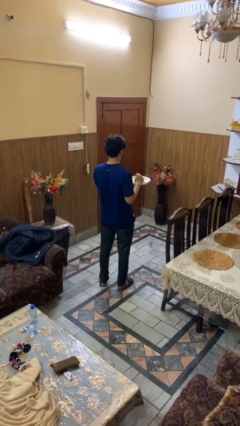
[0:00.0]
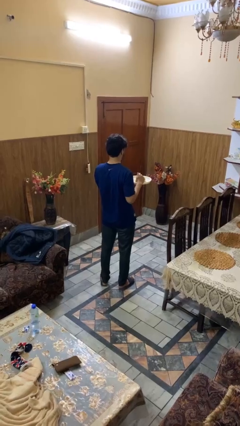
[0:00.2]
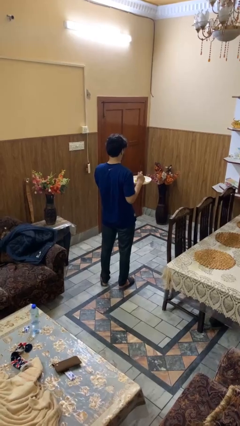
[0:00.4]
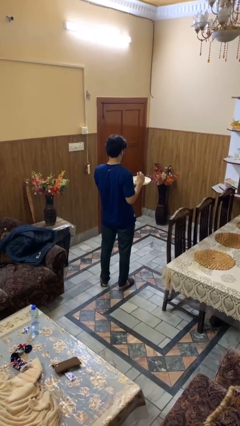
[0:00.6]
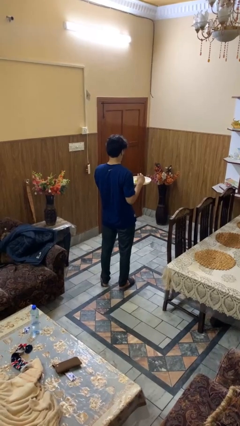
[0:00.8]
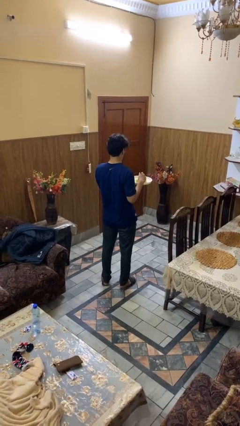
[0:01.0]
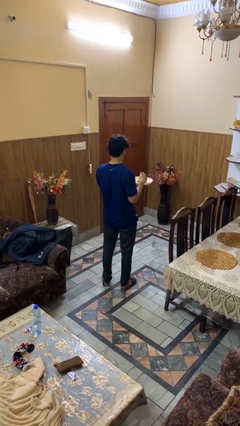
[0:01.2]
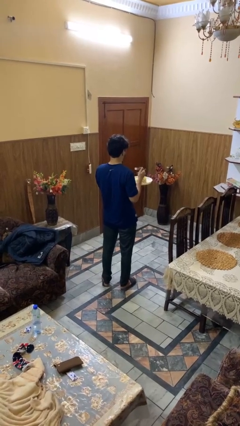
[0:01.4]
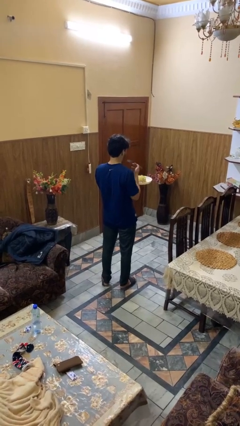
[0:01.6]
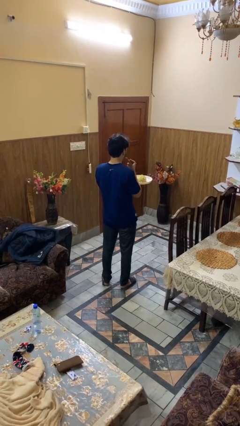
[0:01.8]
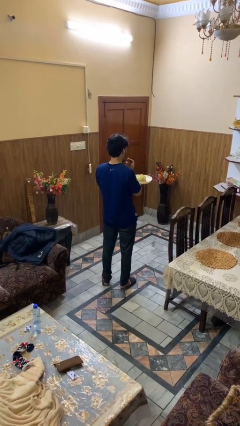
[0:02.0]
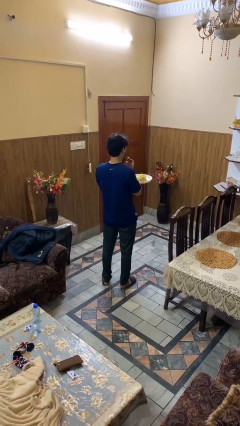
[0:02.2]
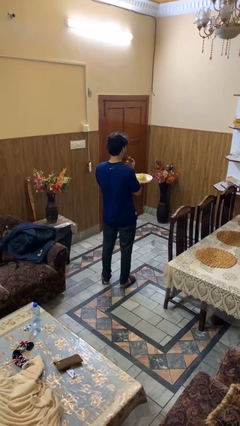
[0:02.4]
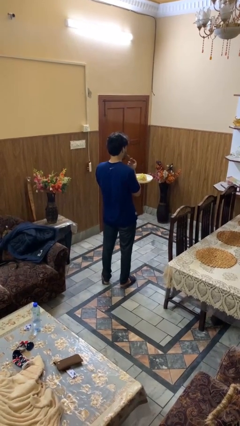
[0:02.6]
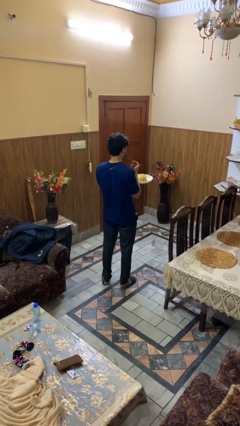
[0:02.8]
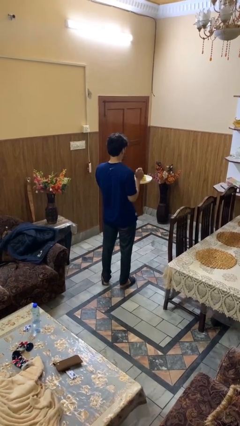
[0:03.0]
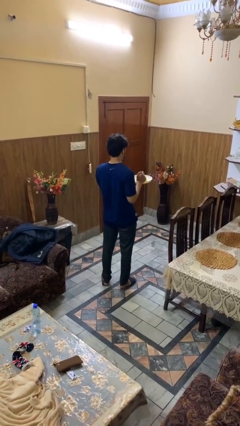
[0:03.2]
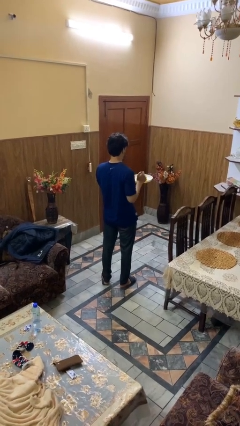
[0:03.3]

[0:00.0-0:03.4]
person eats with utensil

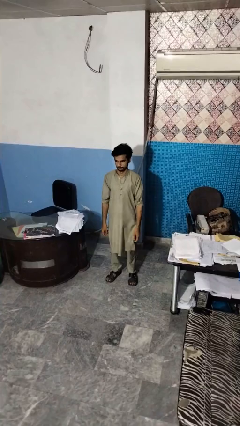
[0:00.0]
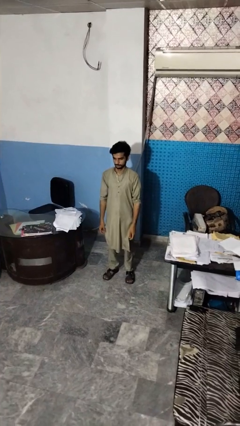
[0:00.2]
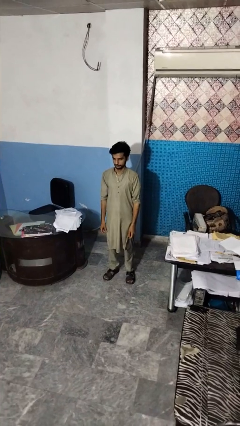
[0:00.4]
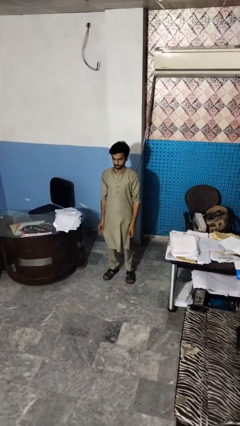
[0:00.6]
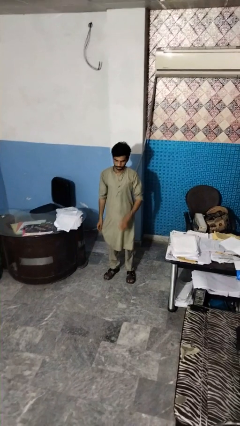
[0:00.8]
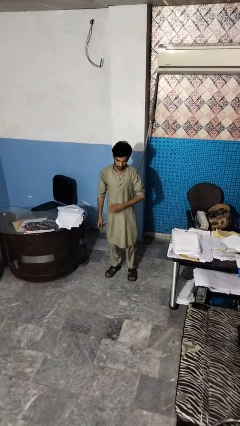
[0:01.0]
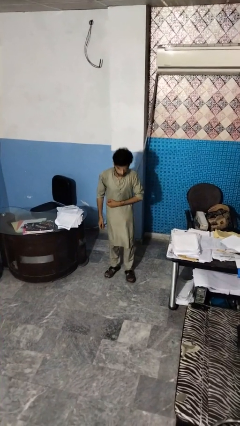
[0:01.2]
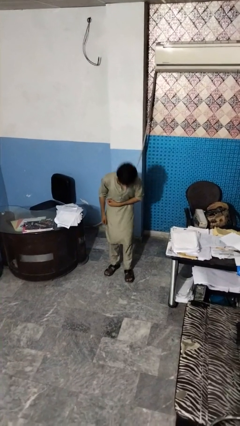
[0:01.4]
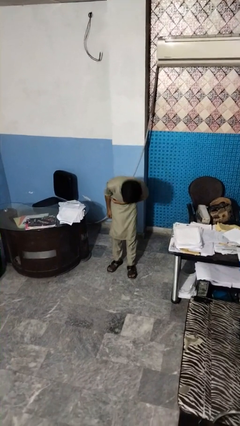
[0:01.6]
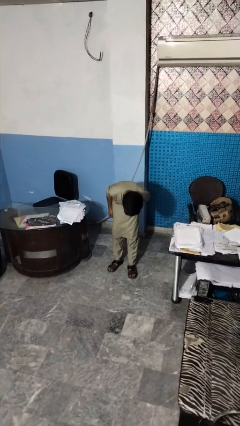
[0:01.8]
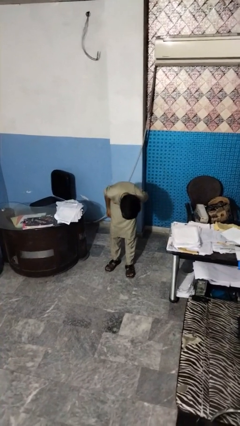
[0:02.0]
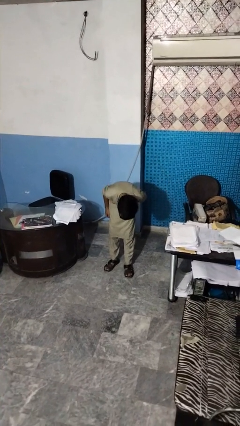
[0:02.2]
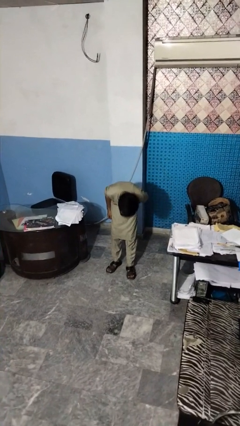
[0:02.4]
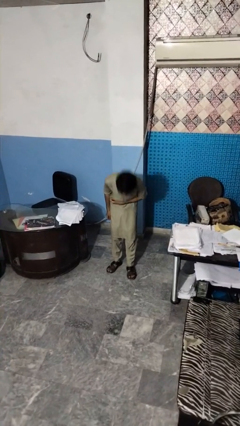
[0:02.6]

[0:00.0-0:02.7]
person bows

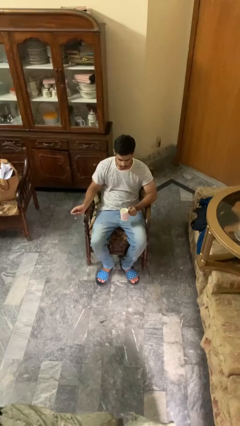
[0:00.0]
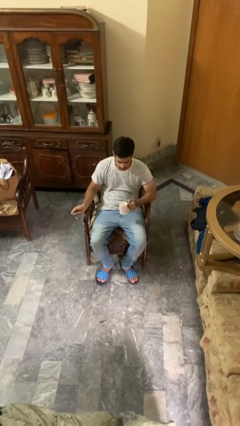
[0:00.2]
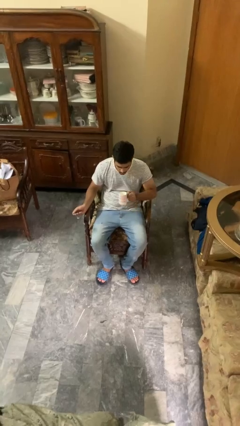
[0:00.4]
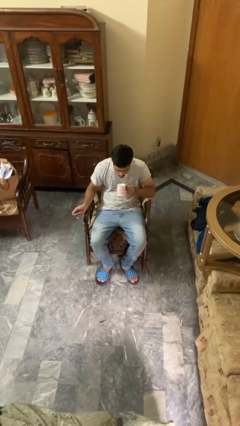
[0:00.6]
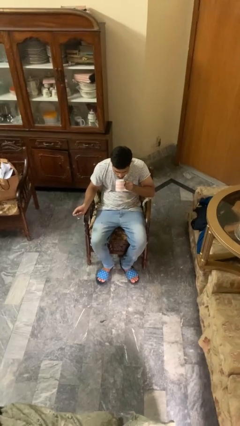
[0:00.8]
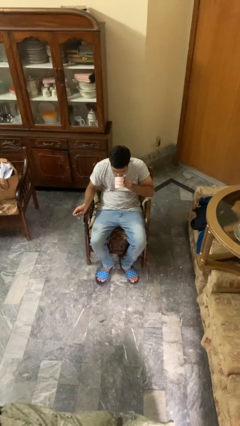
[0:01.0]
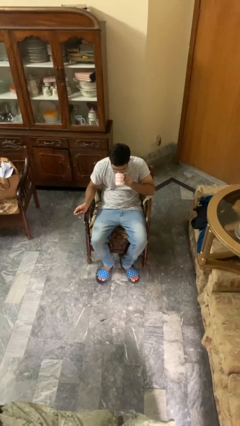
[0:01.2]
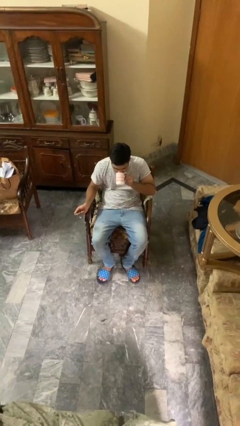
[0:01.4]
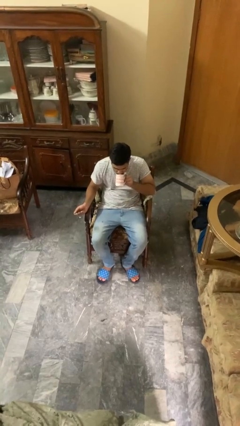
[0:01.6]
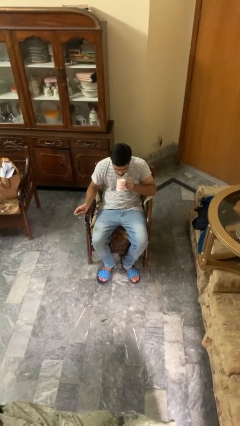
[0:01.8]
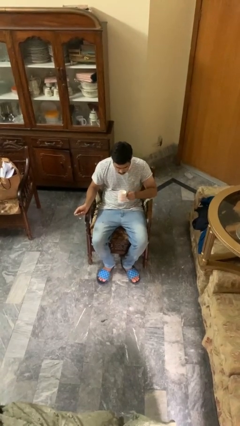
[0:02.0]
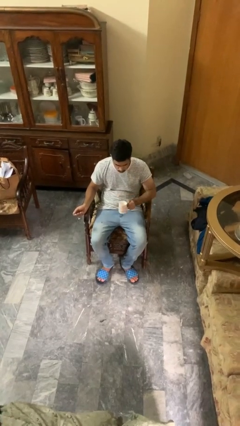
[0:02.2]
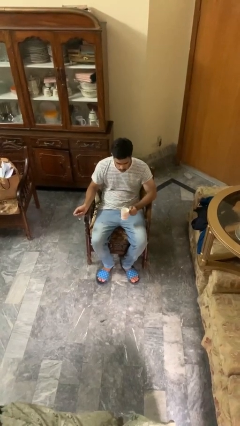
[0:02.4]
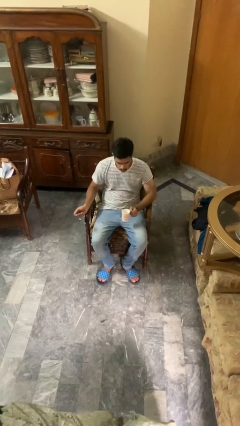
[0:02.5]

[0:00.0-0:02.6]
person drinks from mug

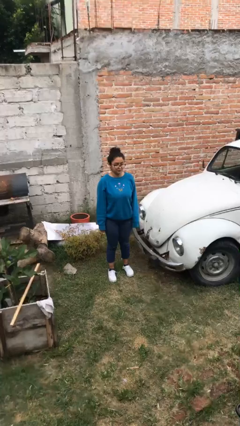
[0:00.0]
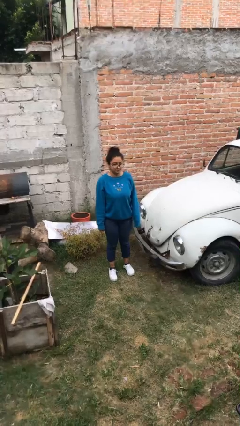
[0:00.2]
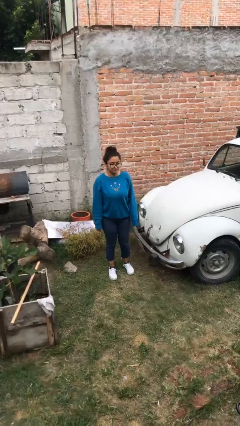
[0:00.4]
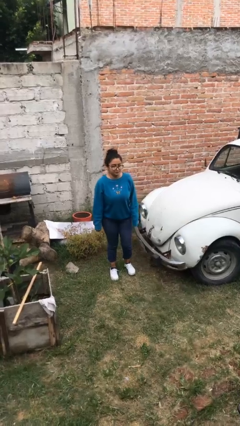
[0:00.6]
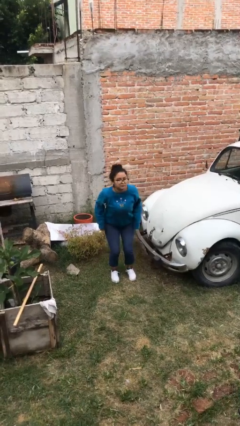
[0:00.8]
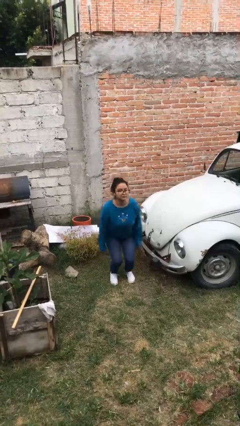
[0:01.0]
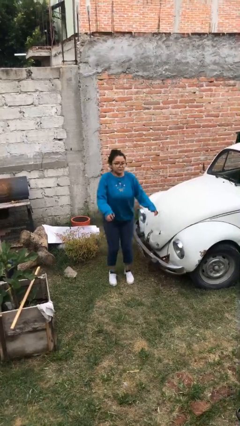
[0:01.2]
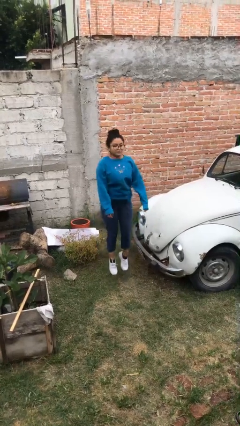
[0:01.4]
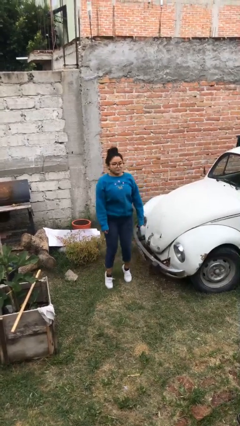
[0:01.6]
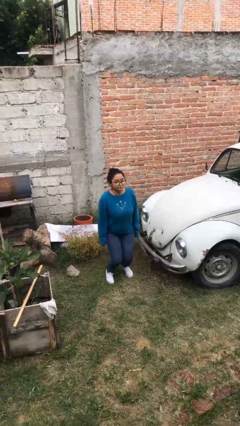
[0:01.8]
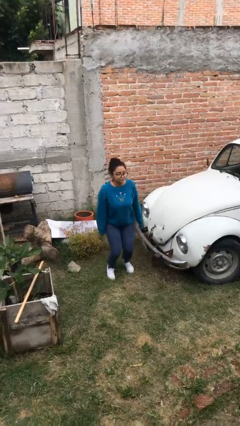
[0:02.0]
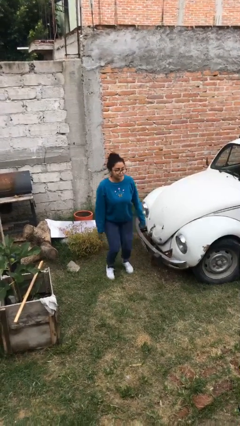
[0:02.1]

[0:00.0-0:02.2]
person jumps

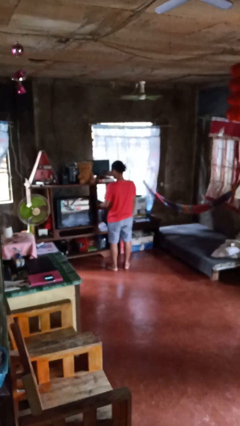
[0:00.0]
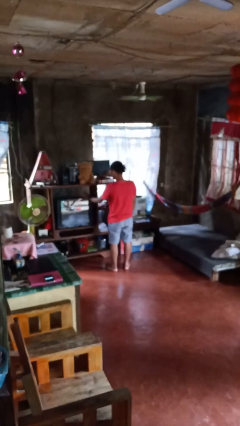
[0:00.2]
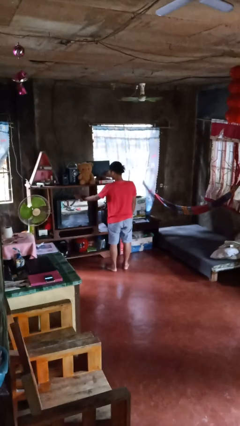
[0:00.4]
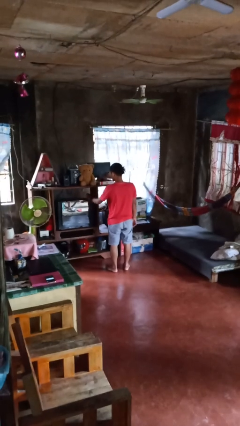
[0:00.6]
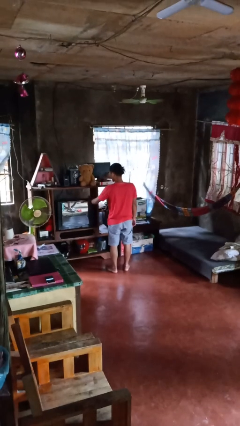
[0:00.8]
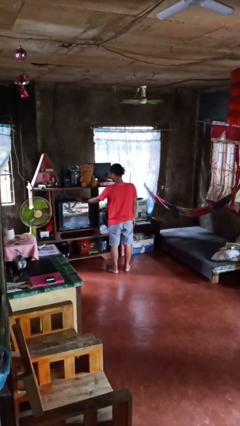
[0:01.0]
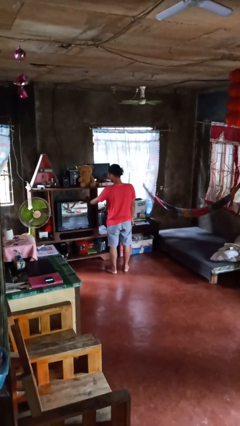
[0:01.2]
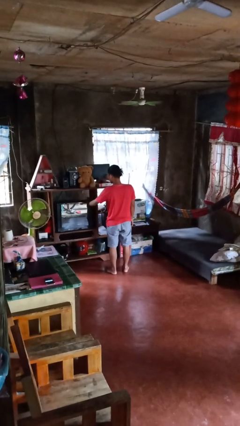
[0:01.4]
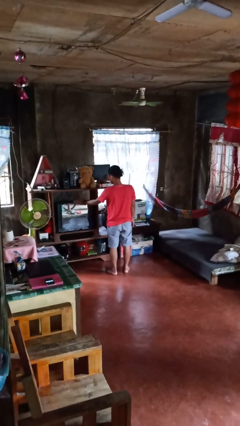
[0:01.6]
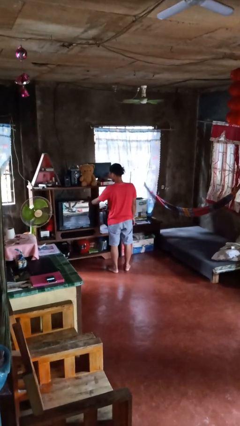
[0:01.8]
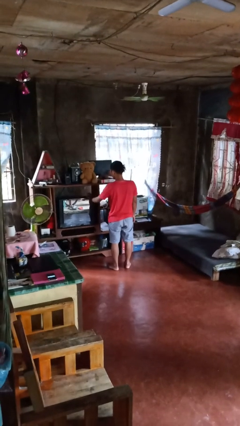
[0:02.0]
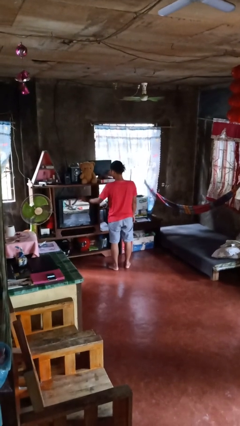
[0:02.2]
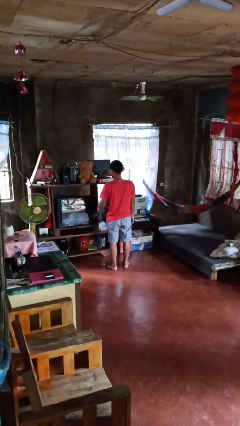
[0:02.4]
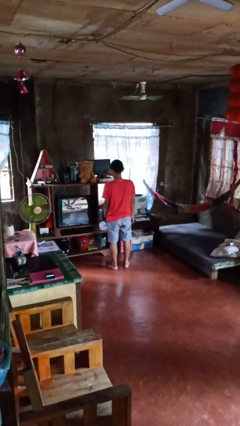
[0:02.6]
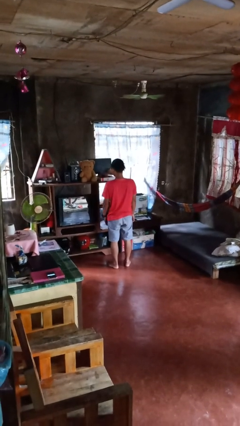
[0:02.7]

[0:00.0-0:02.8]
person waves hand over object

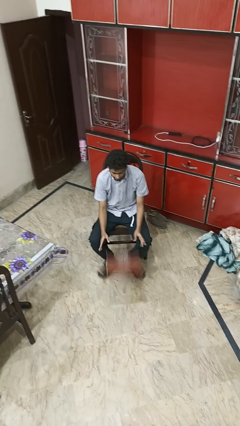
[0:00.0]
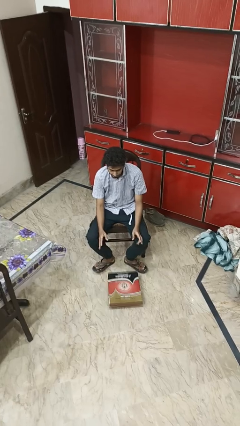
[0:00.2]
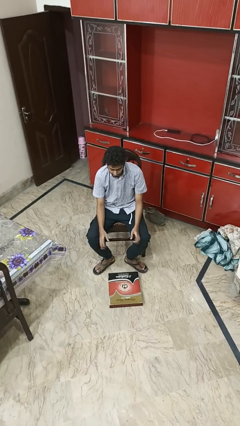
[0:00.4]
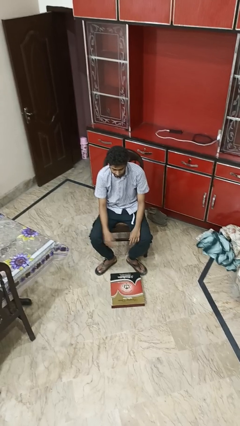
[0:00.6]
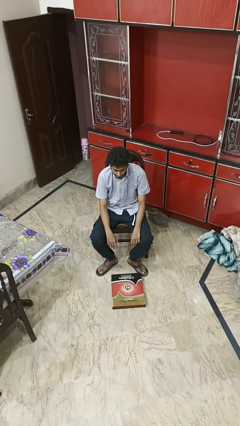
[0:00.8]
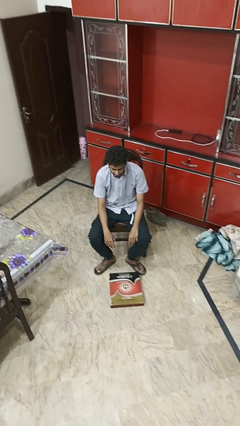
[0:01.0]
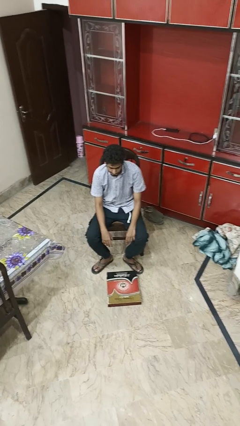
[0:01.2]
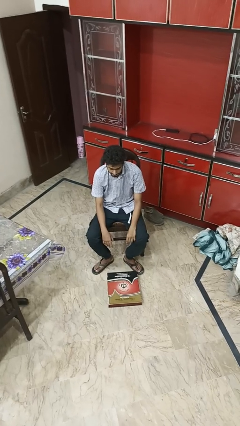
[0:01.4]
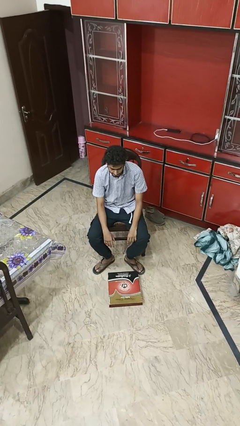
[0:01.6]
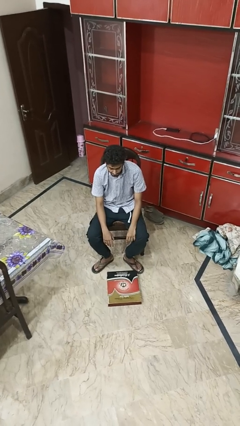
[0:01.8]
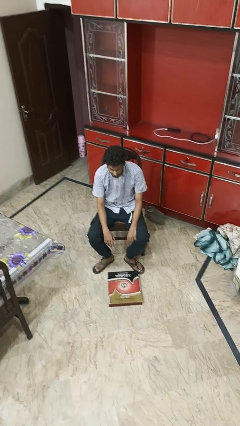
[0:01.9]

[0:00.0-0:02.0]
person drops object

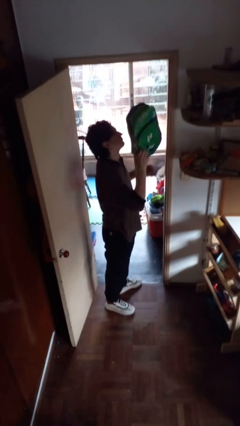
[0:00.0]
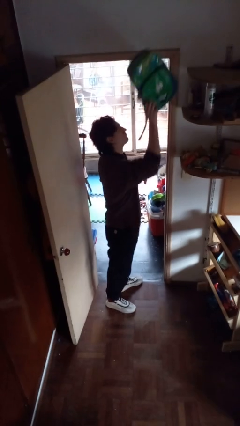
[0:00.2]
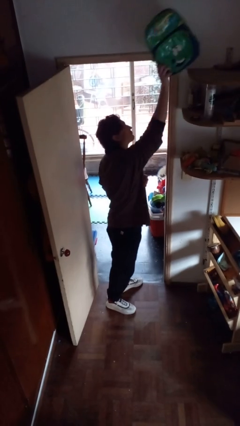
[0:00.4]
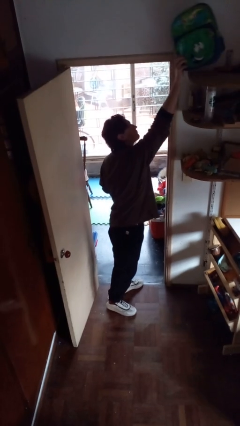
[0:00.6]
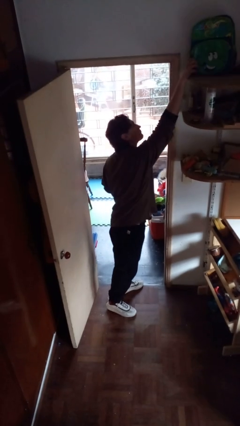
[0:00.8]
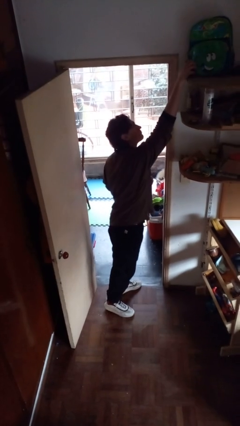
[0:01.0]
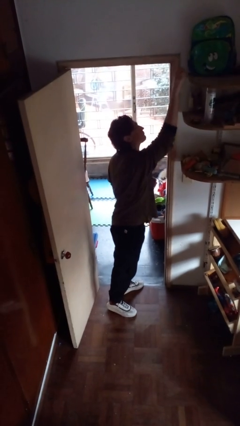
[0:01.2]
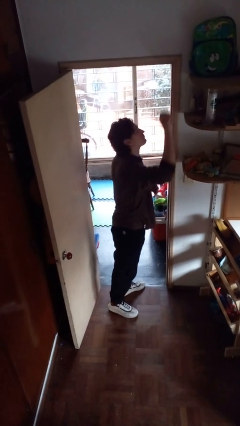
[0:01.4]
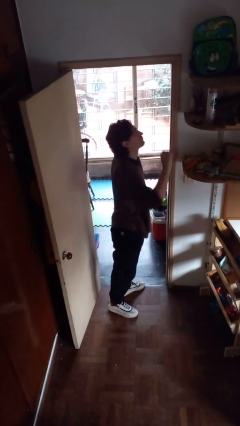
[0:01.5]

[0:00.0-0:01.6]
person picks up object from shelf

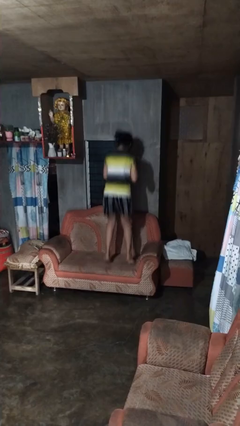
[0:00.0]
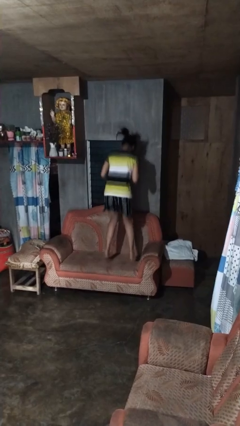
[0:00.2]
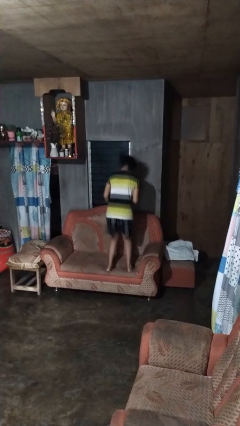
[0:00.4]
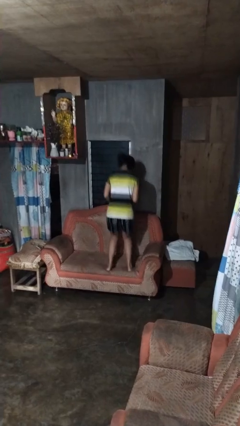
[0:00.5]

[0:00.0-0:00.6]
person jumps on couch
